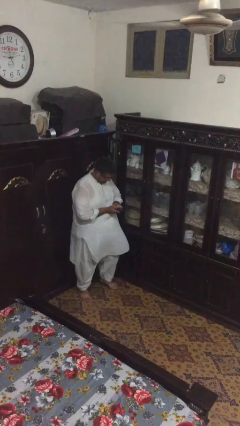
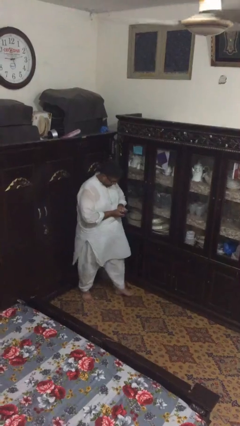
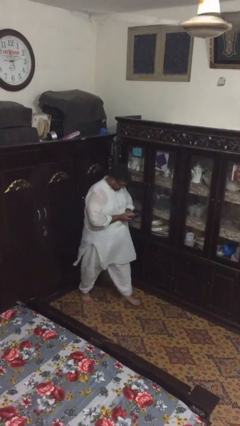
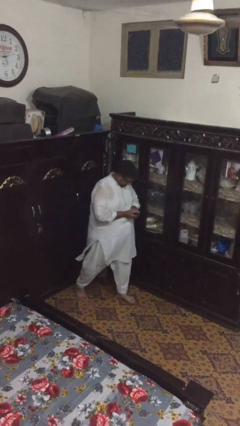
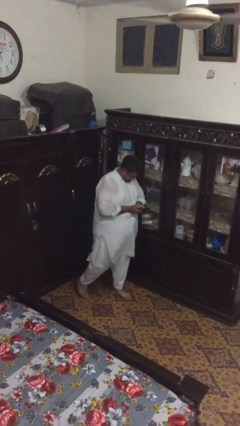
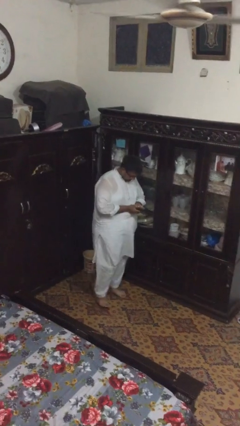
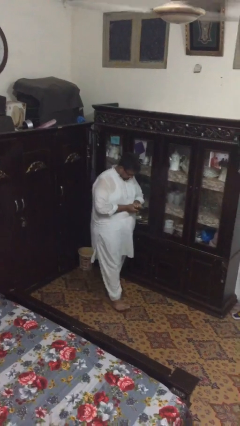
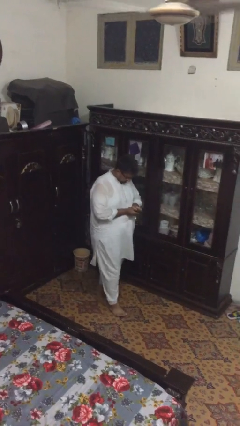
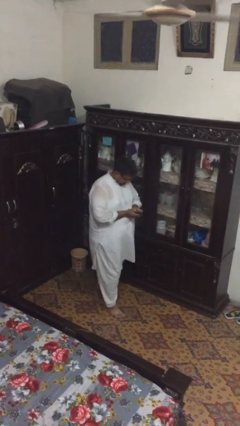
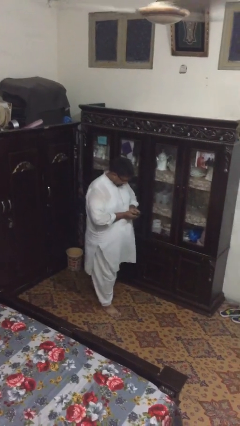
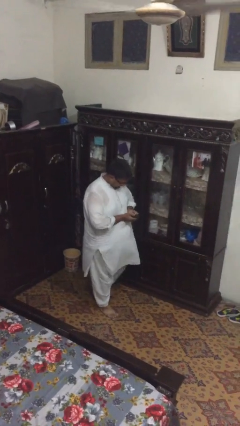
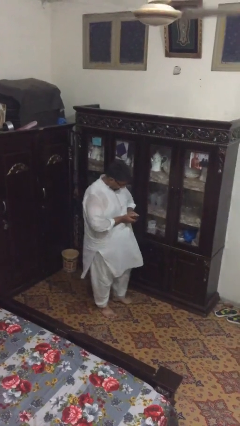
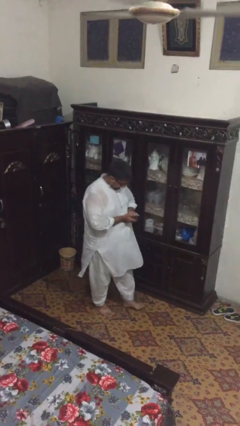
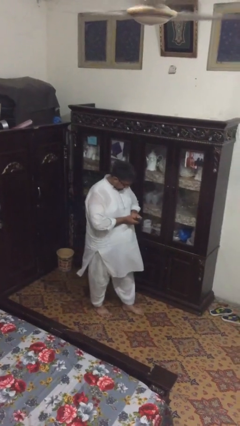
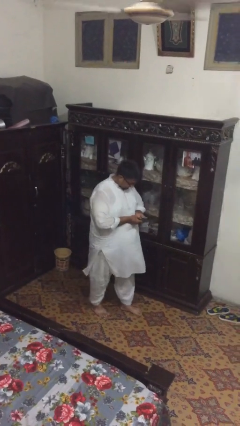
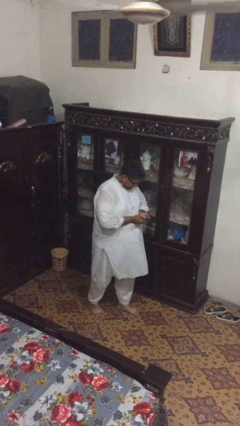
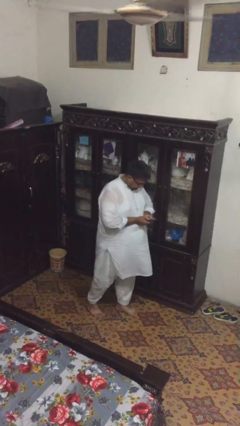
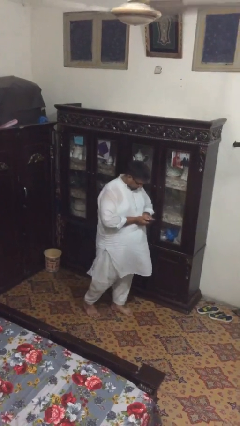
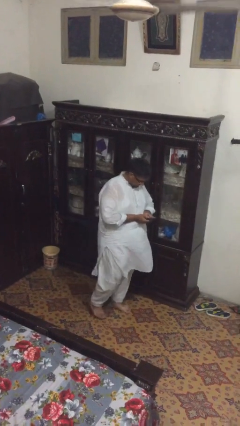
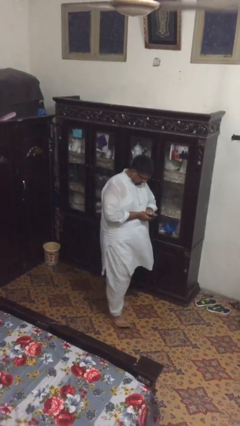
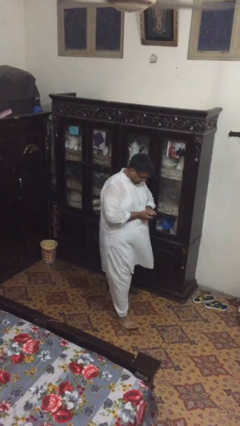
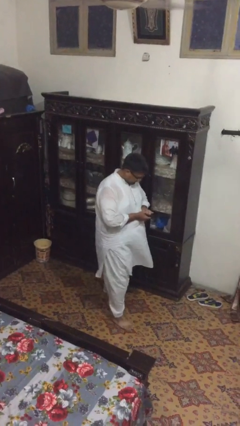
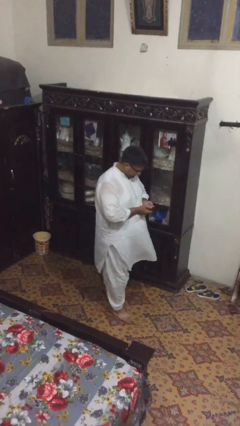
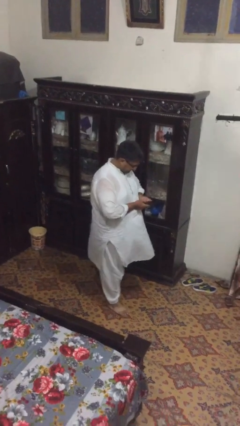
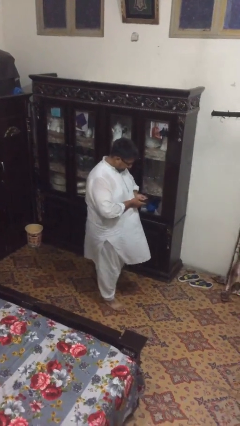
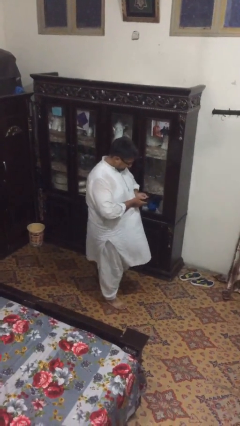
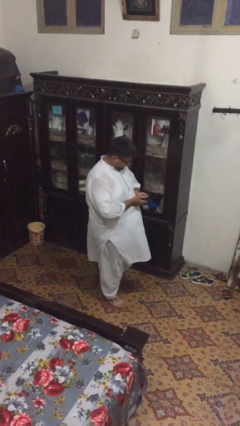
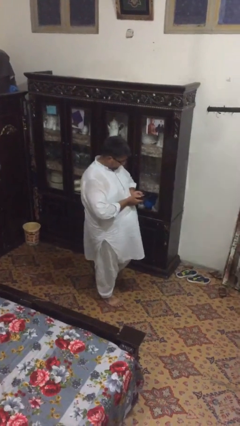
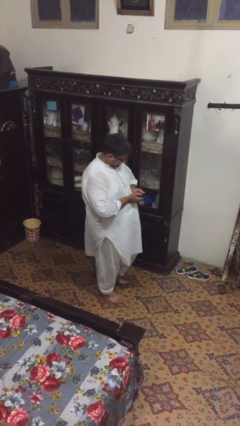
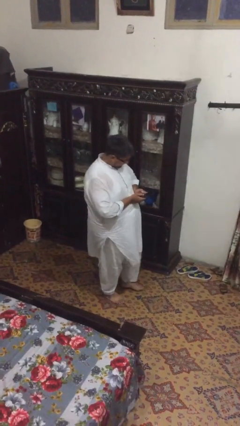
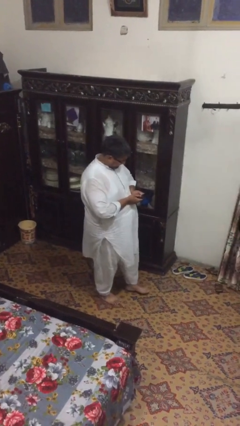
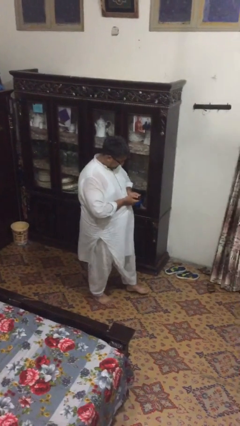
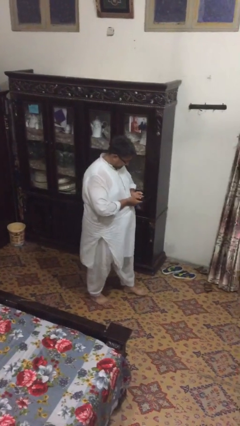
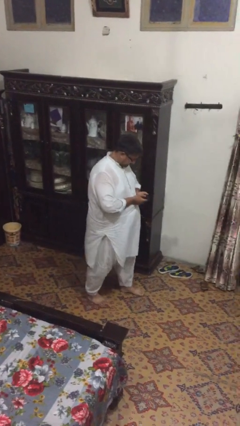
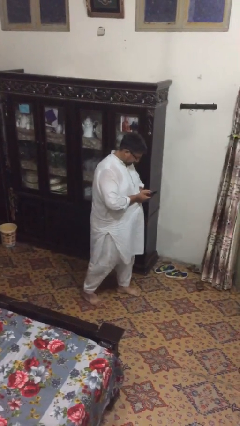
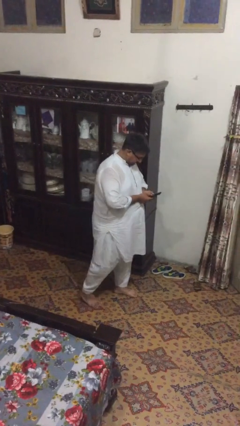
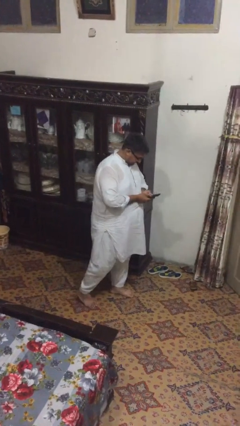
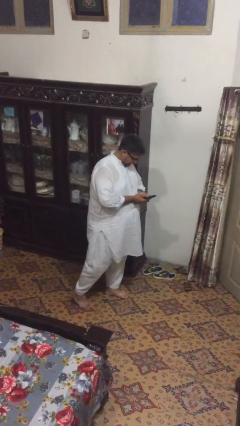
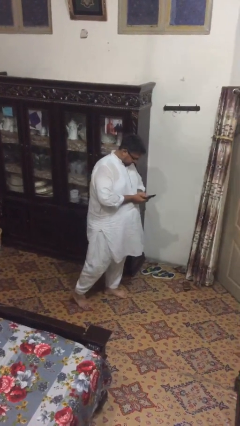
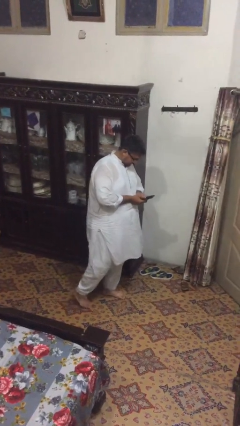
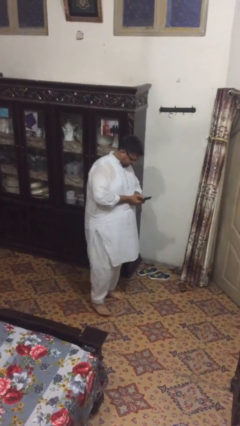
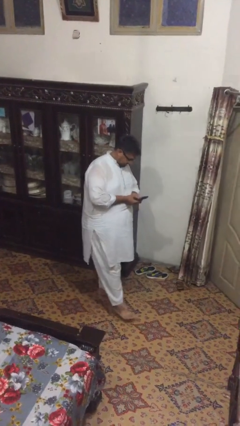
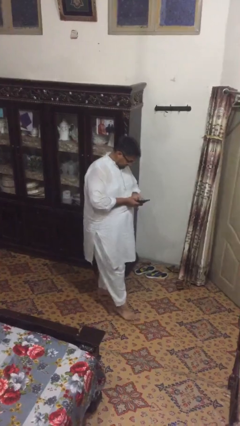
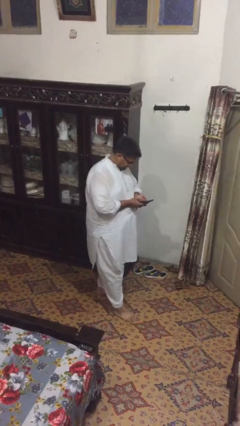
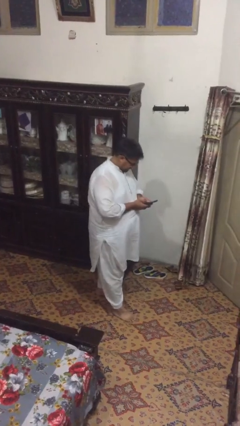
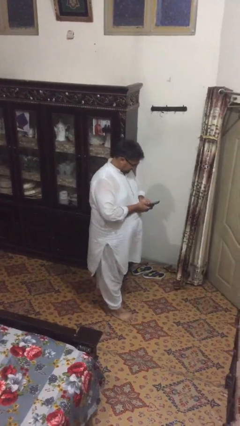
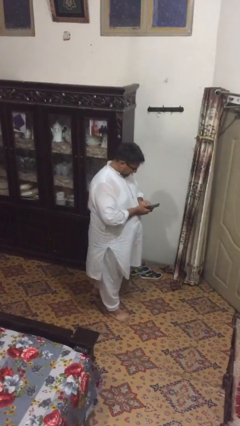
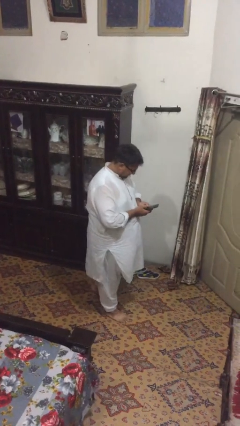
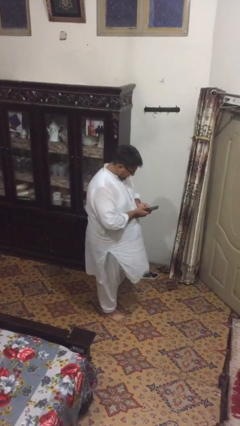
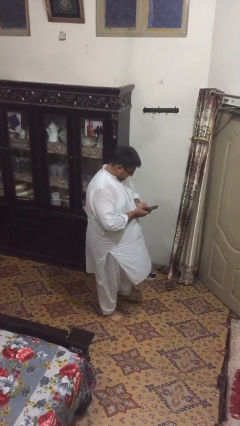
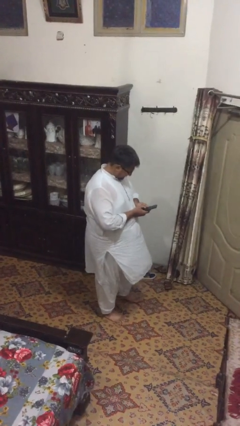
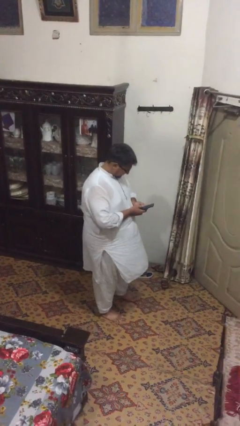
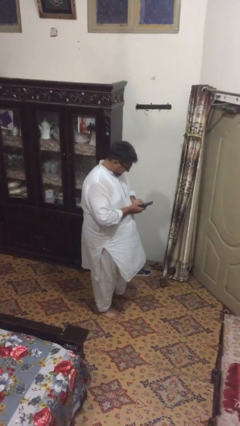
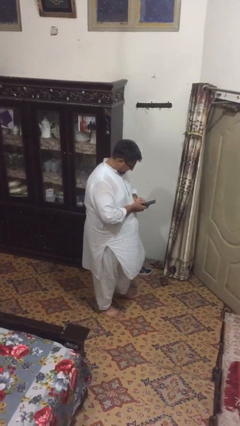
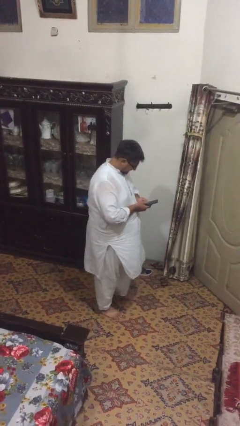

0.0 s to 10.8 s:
person texts on phone

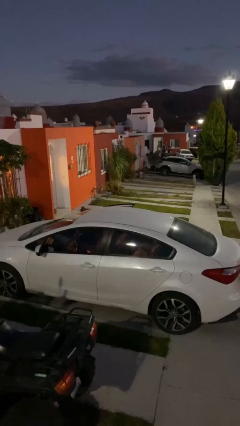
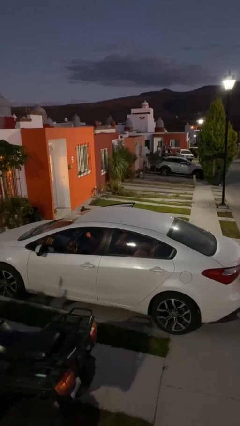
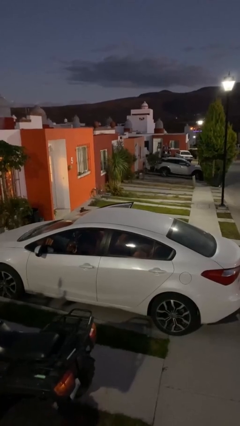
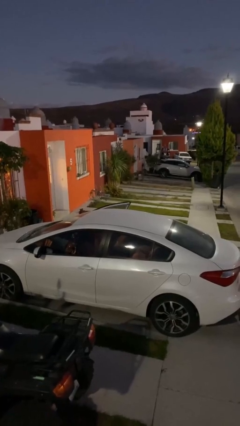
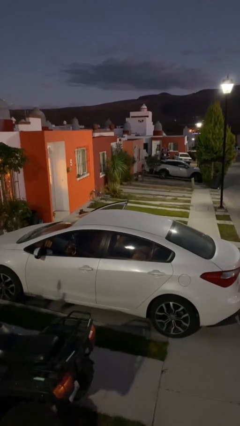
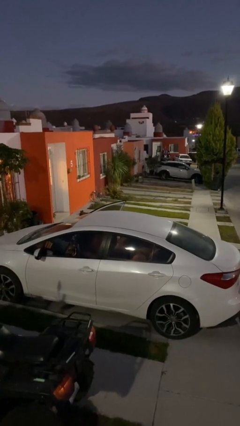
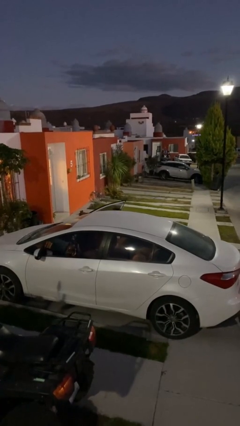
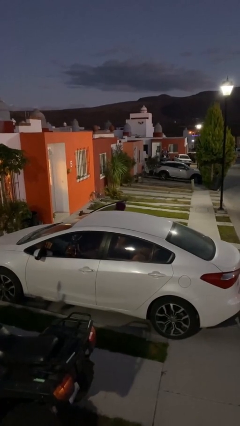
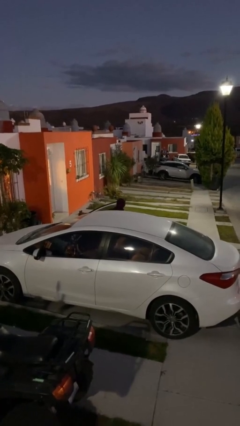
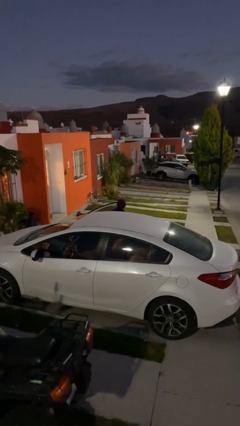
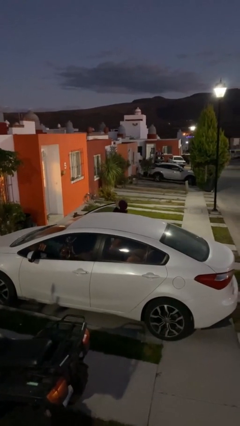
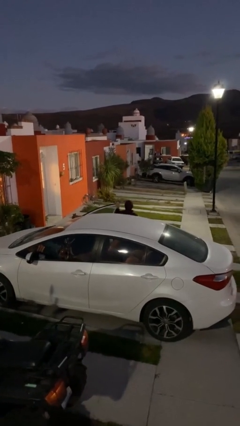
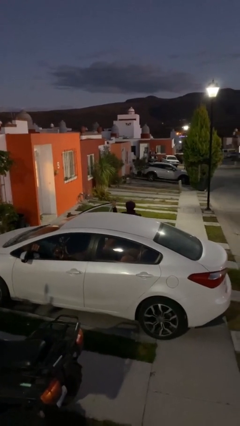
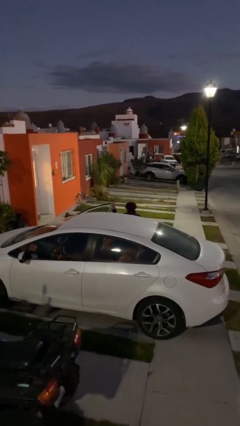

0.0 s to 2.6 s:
car drops off person

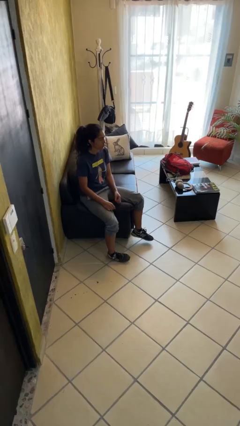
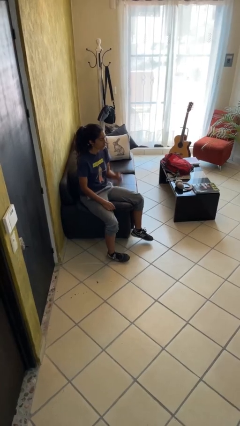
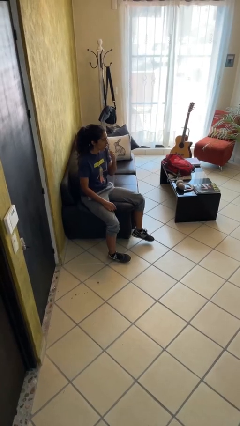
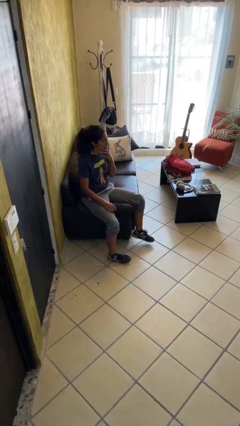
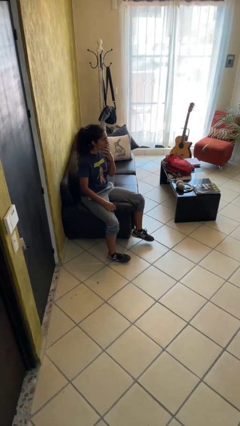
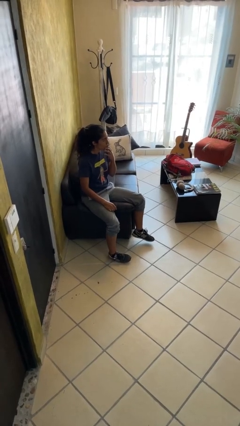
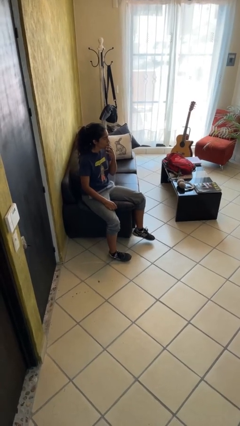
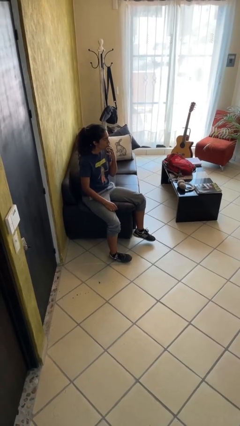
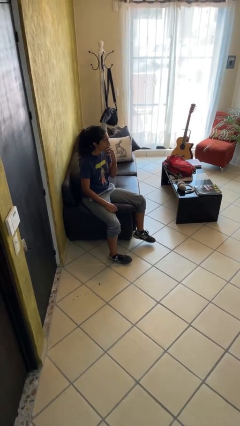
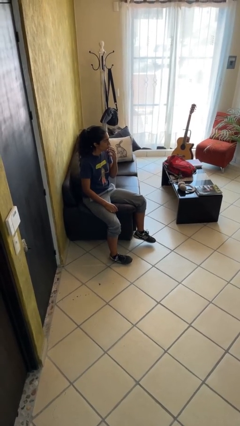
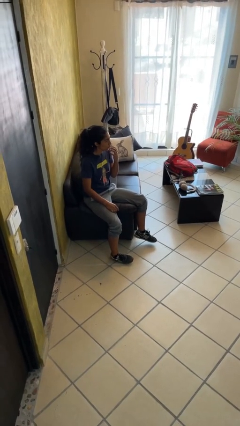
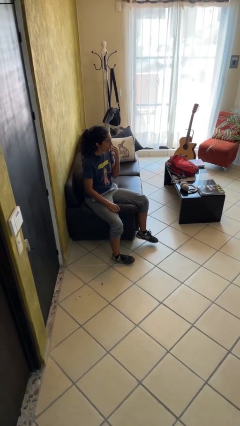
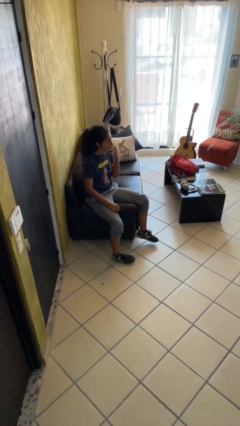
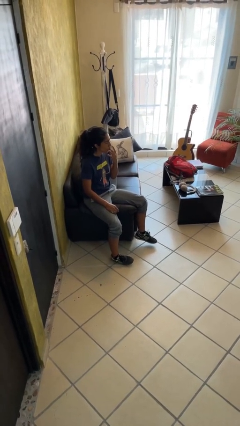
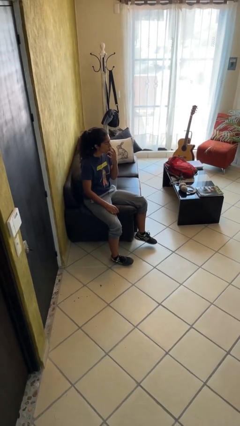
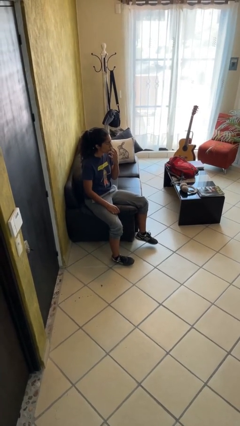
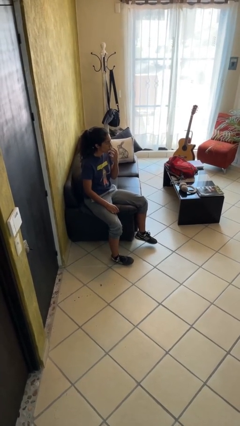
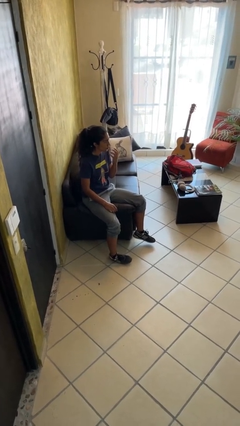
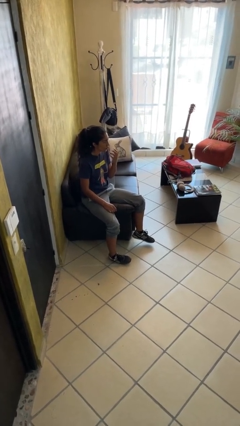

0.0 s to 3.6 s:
person licks fingers

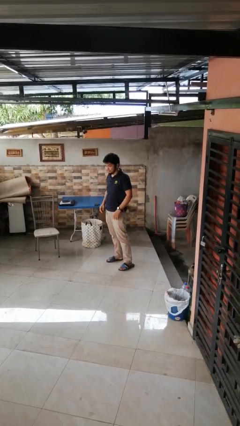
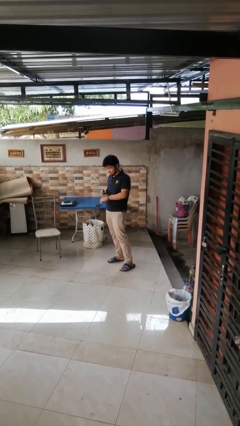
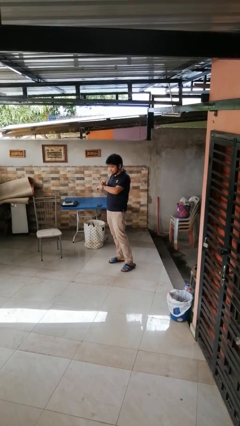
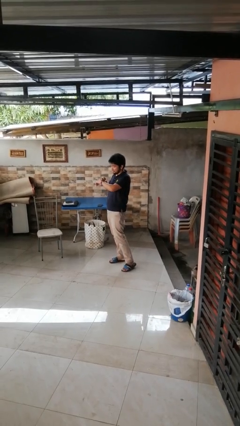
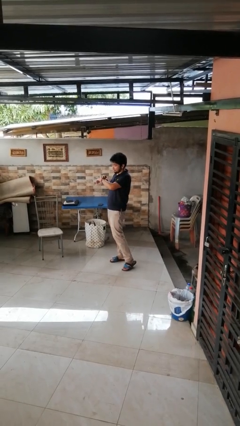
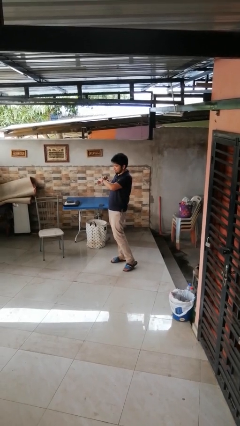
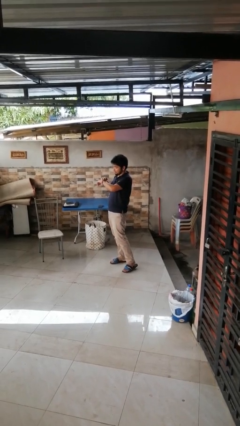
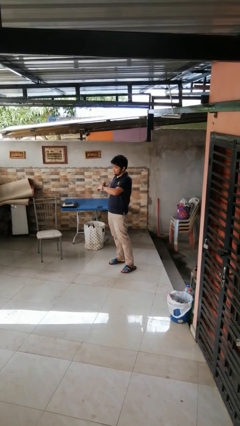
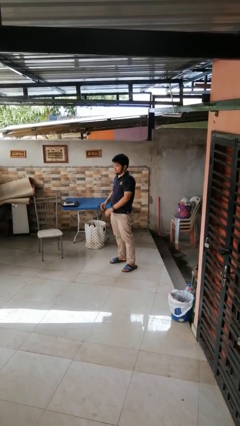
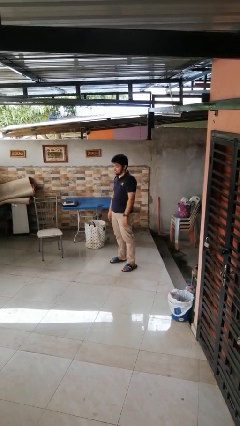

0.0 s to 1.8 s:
person looks at wristwatch
